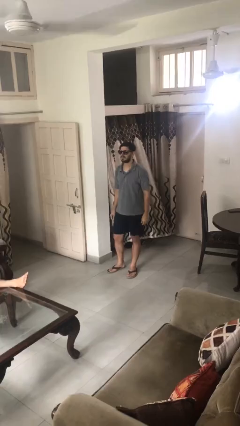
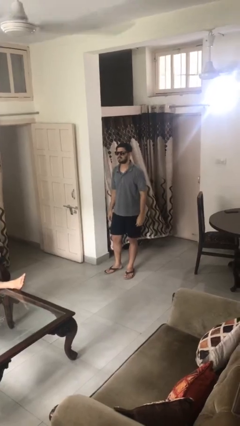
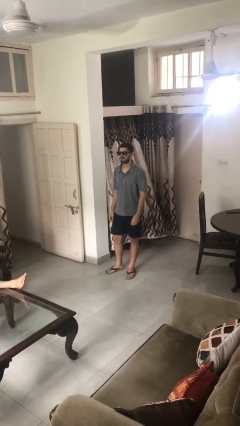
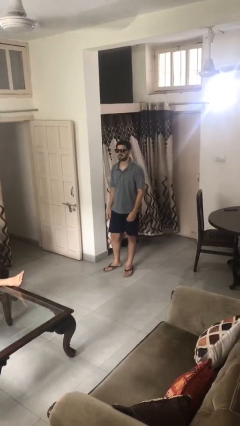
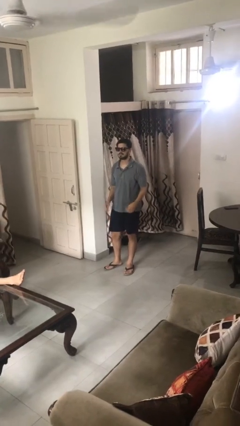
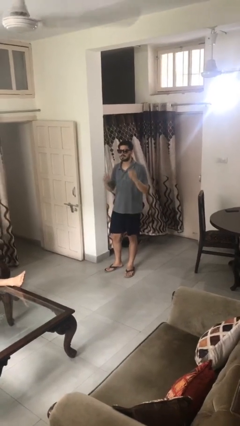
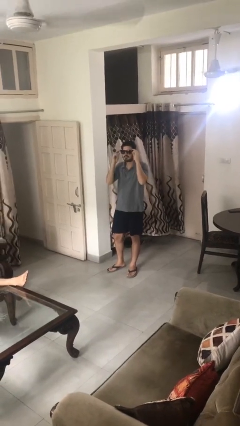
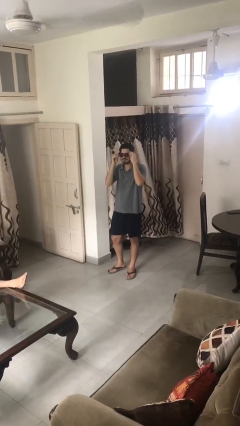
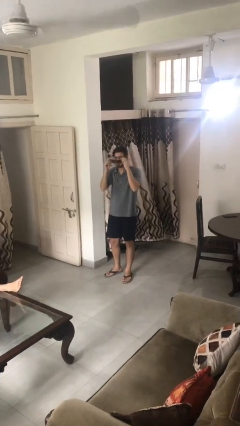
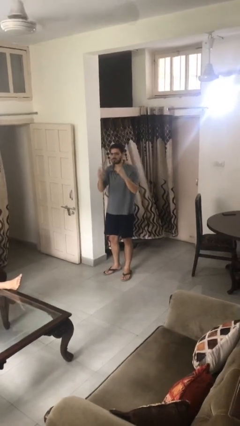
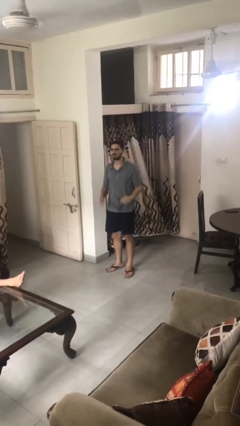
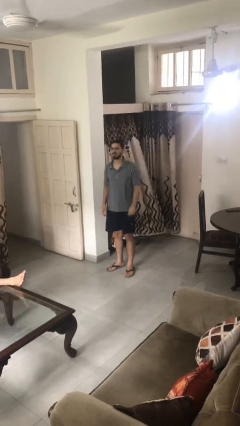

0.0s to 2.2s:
person takes off sunglasses

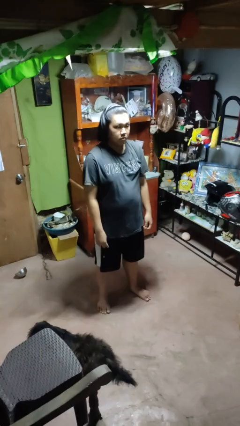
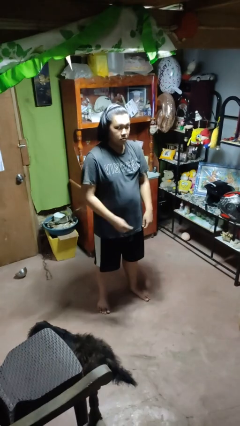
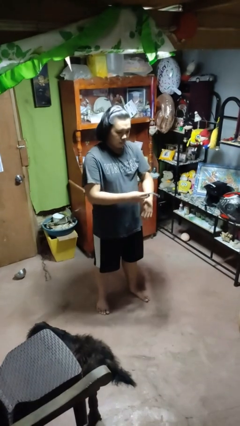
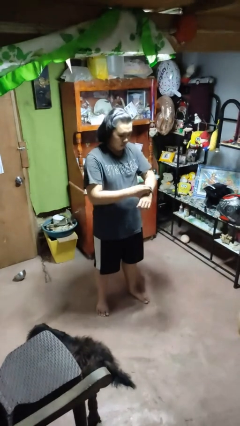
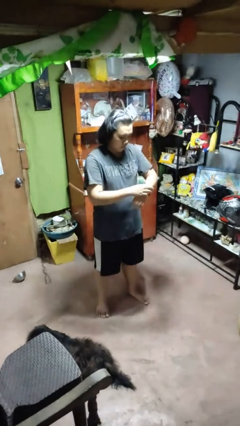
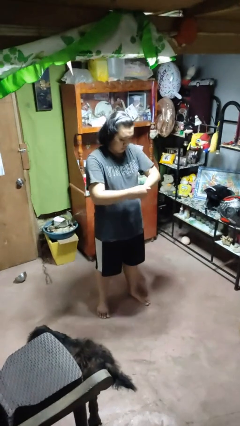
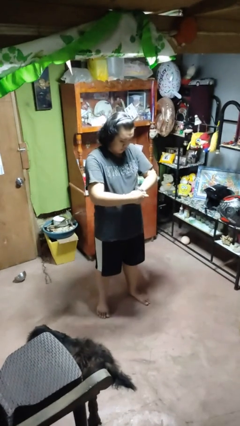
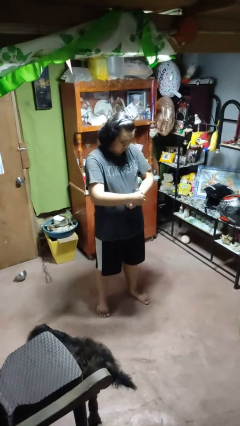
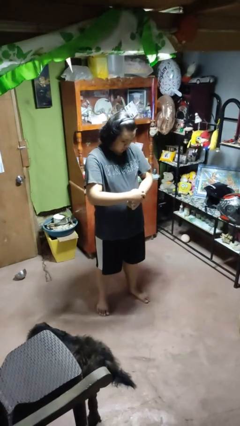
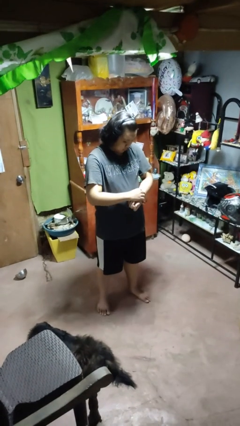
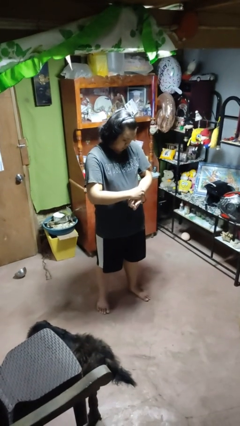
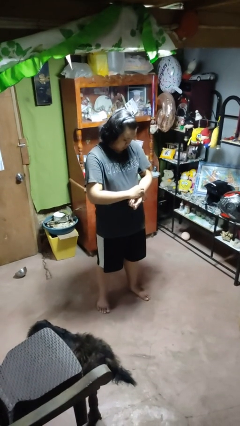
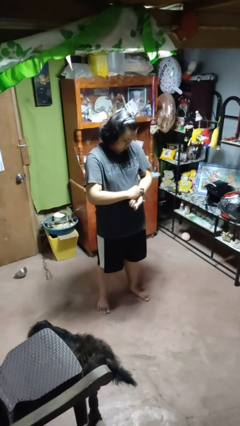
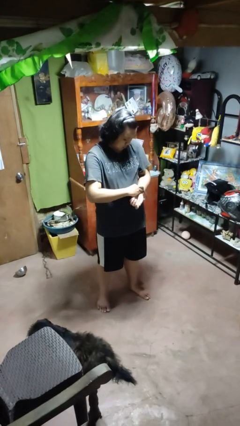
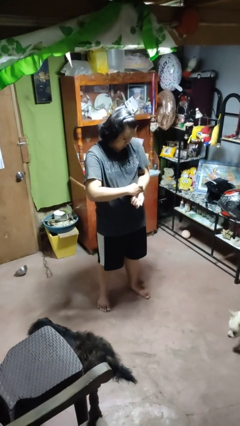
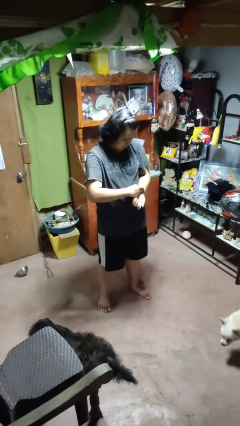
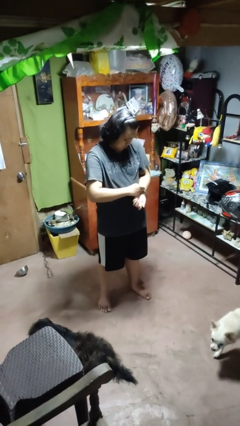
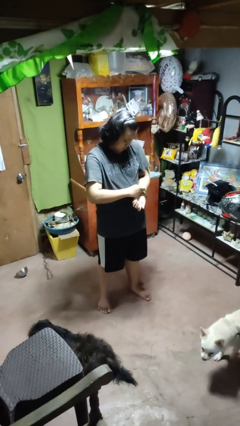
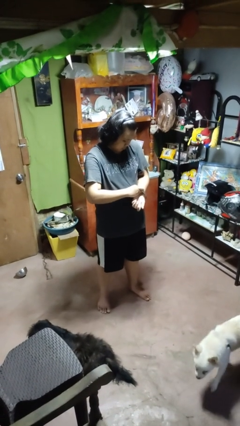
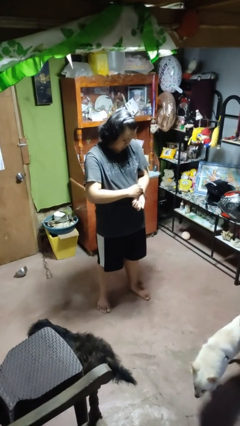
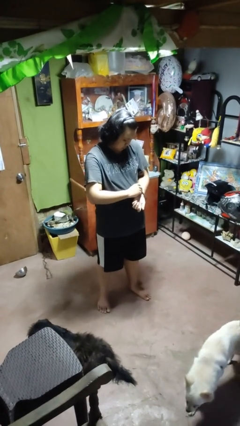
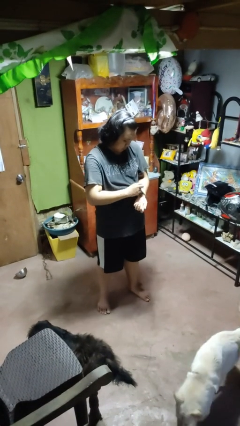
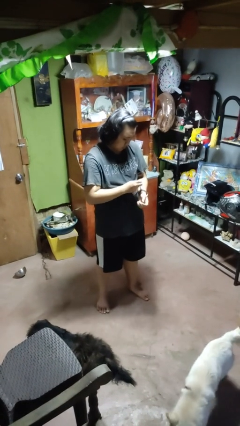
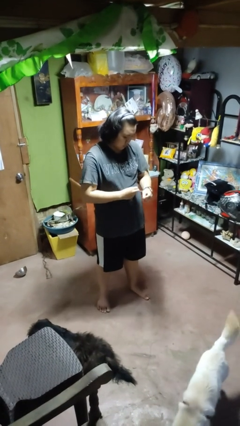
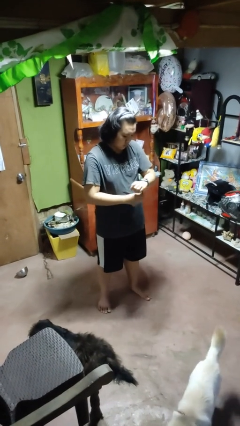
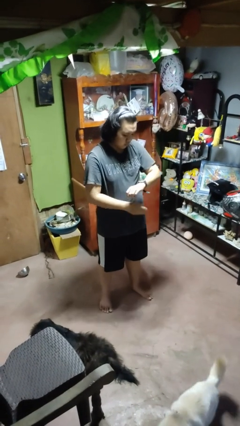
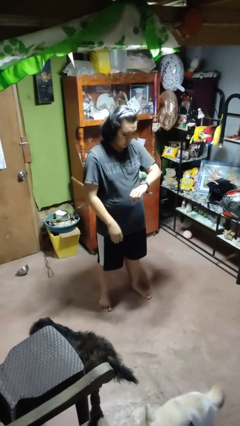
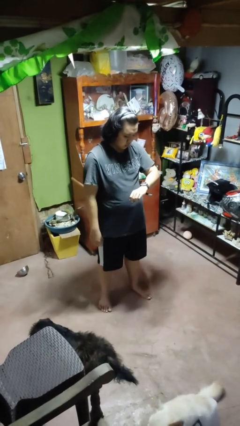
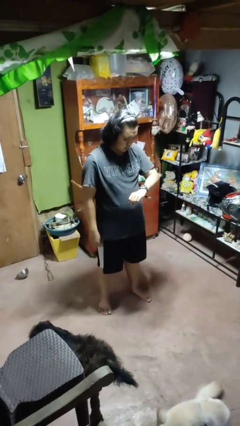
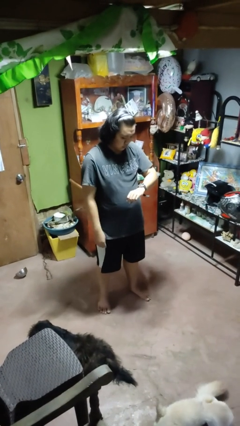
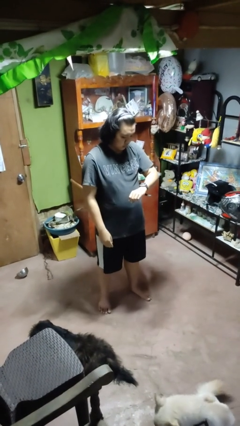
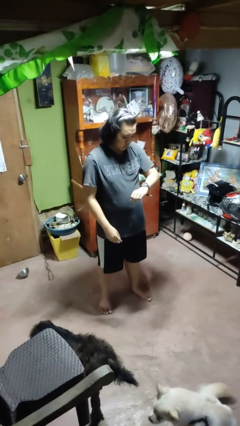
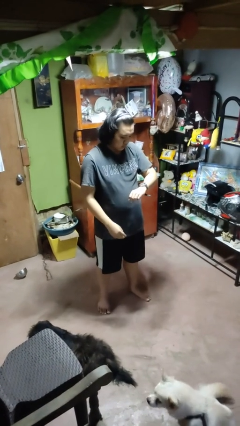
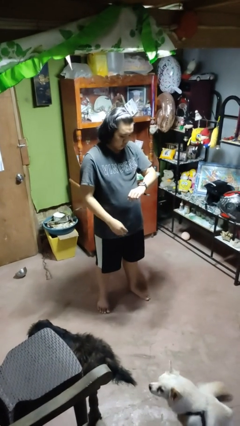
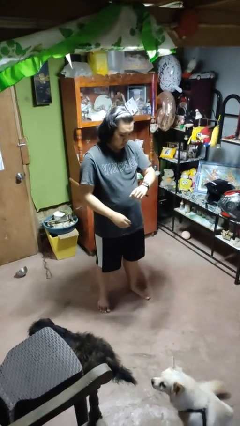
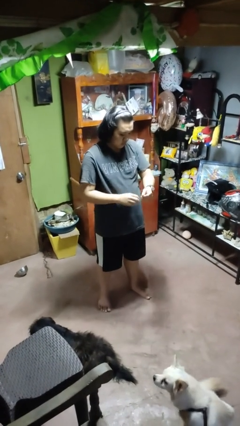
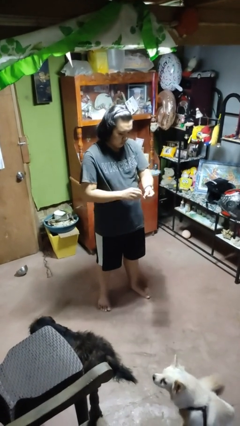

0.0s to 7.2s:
person puts on wristwatch

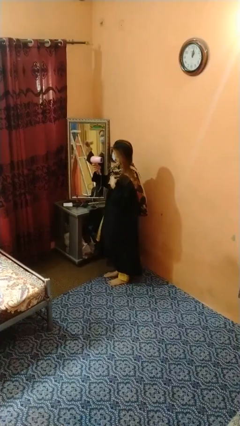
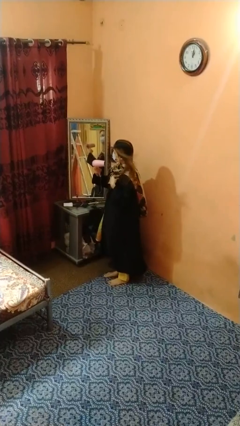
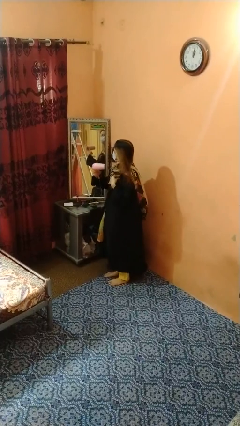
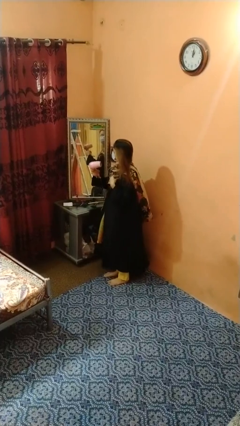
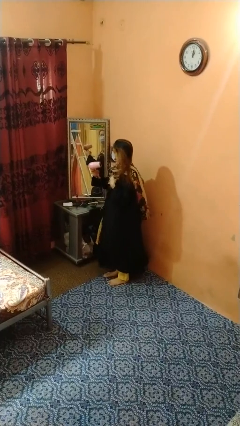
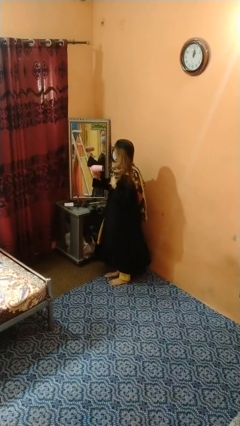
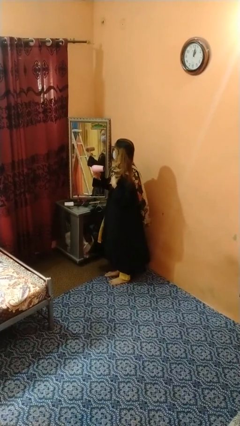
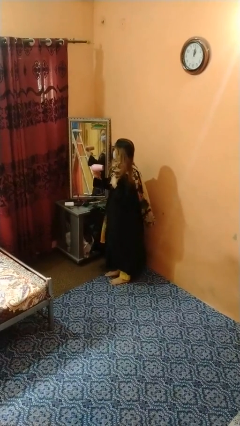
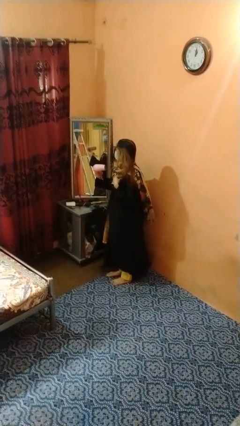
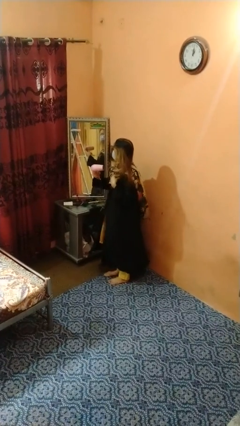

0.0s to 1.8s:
person dries hair with hairdryer

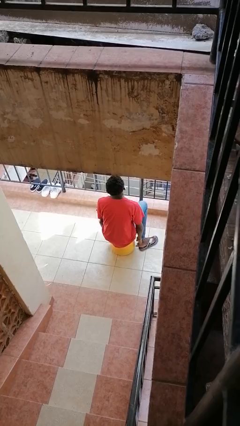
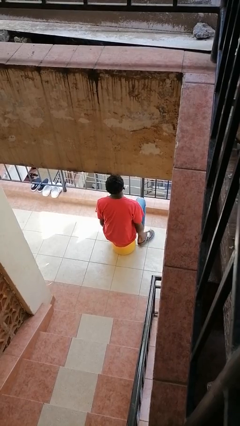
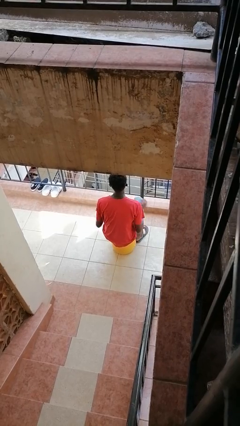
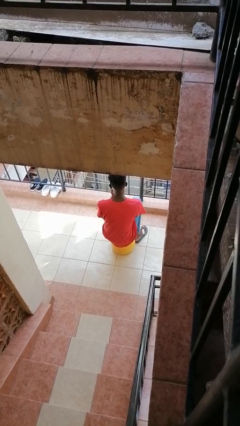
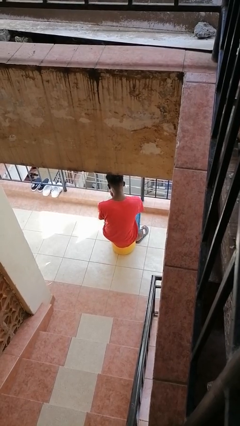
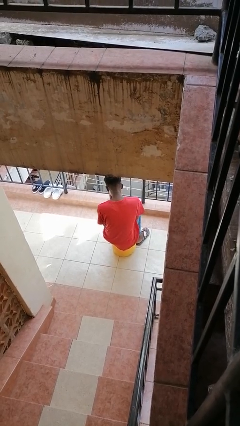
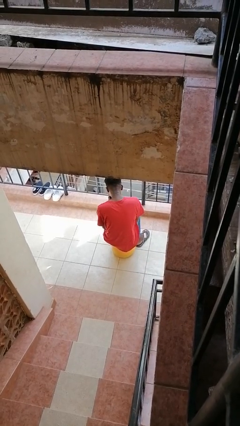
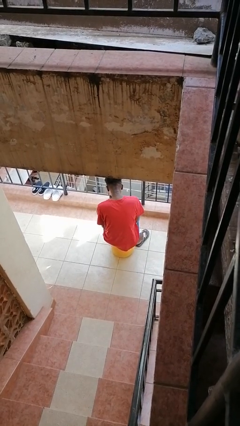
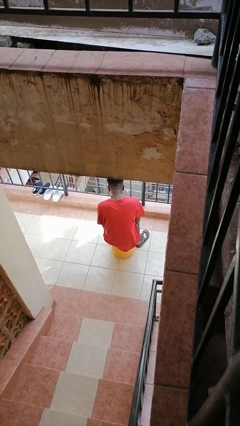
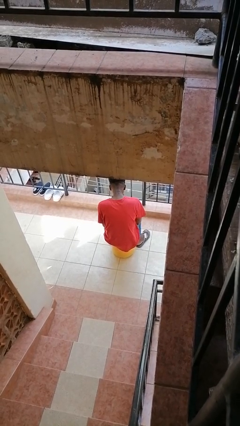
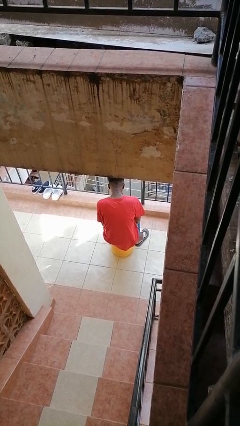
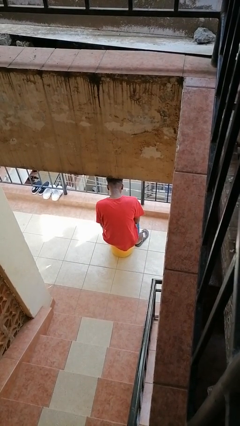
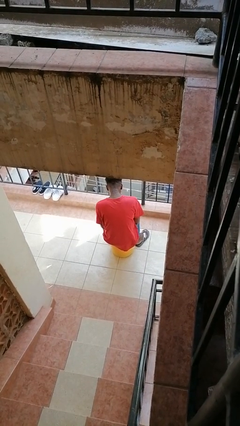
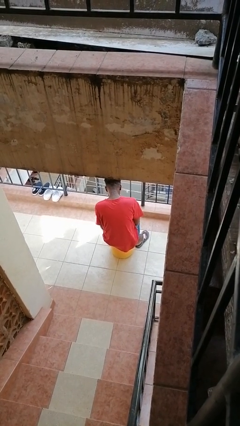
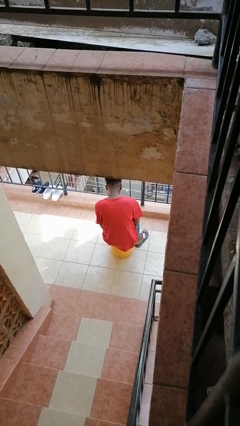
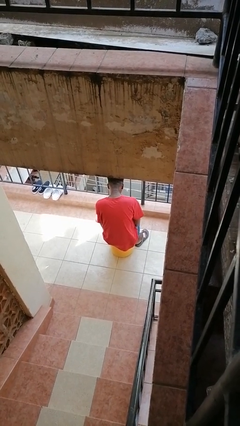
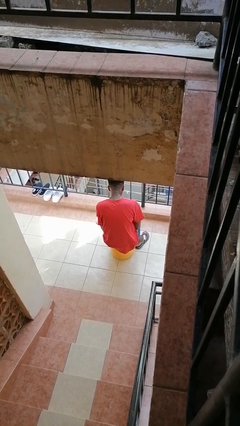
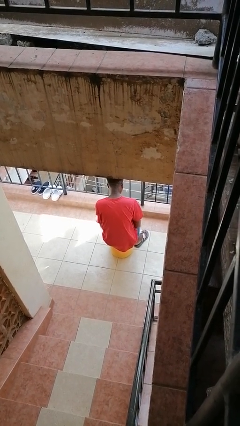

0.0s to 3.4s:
person blows into hands

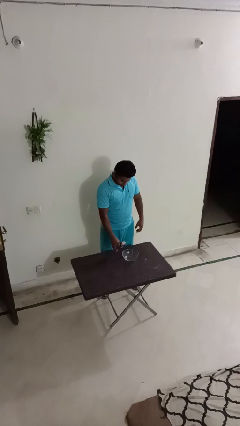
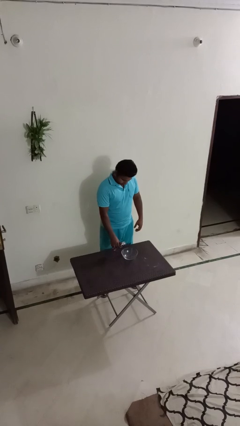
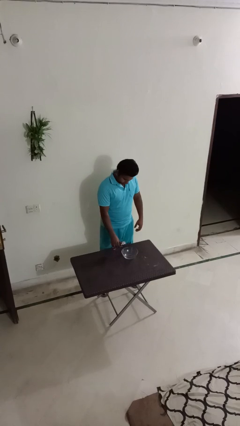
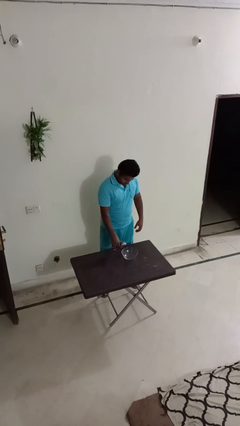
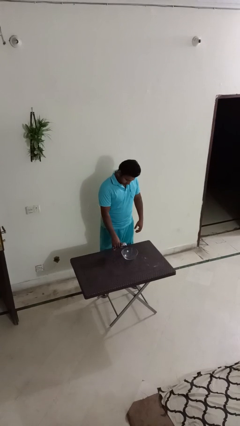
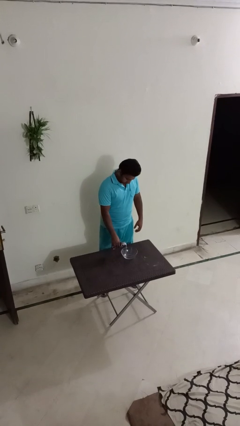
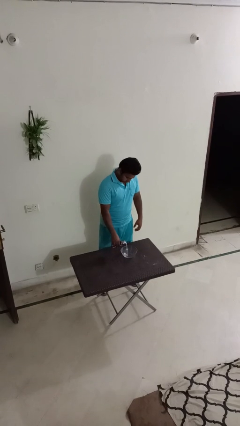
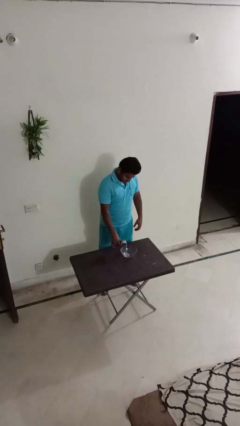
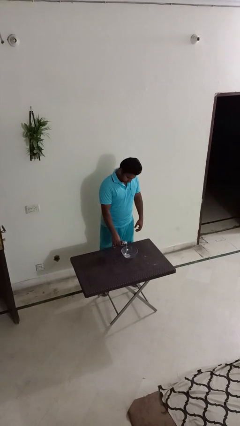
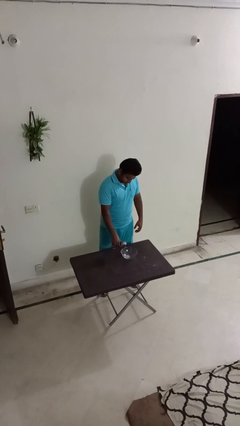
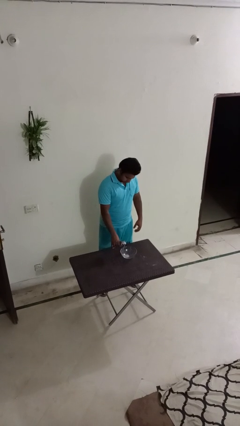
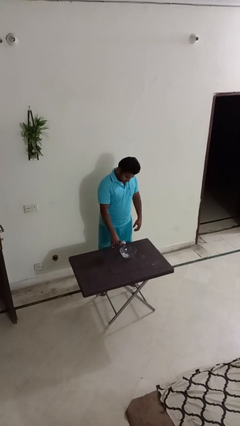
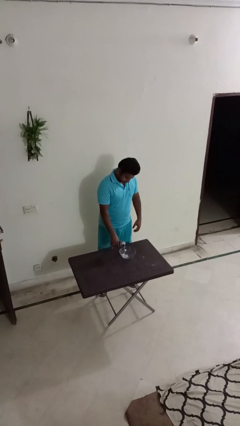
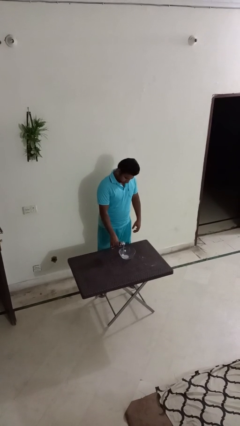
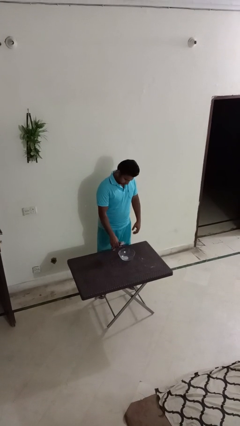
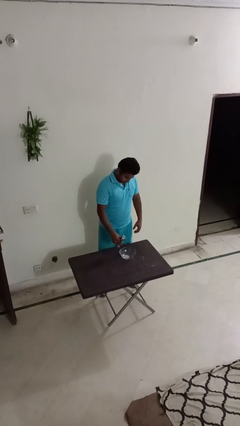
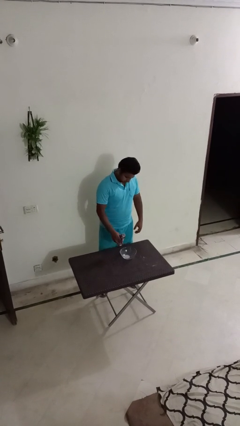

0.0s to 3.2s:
person pours into bowl
